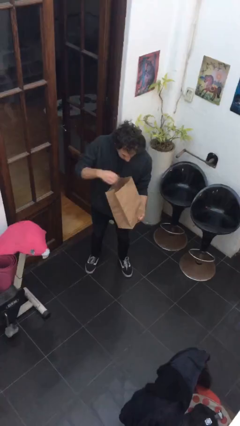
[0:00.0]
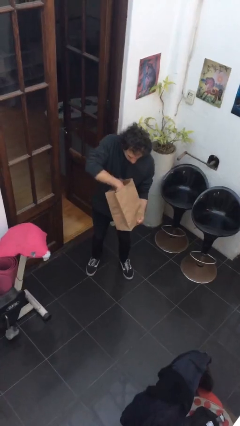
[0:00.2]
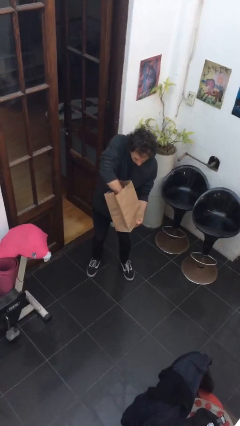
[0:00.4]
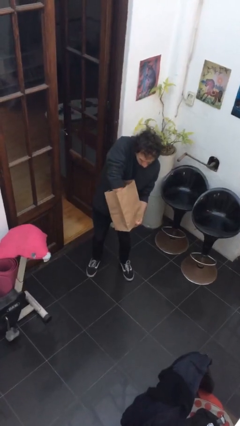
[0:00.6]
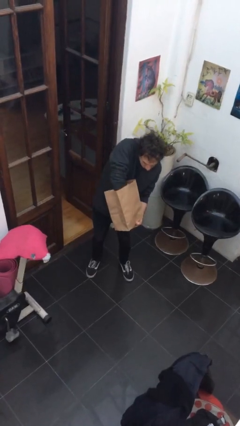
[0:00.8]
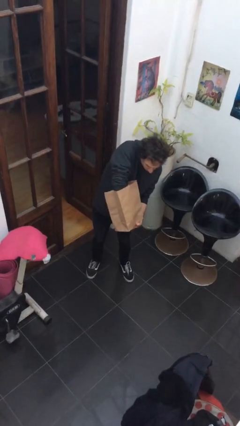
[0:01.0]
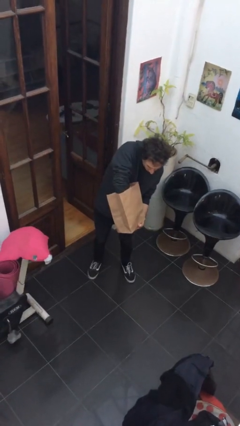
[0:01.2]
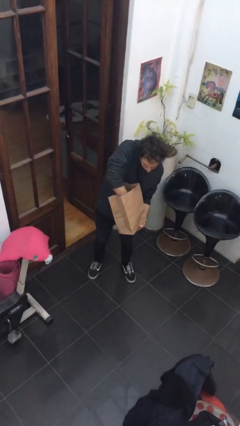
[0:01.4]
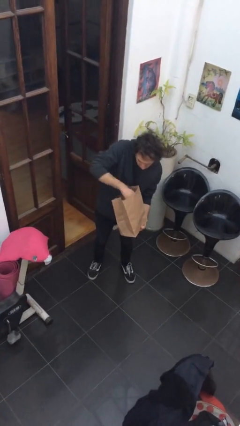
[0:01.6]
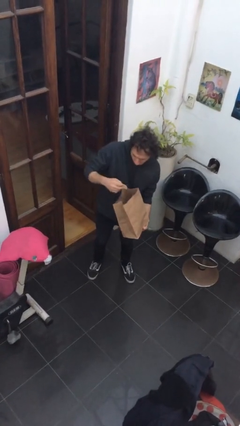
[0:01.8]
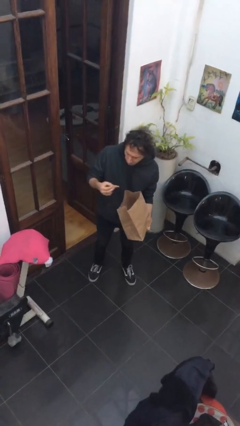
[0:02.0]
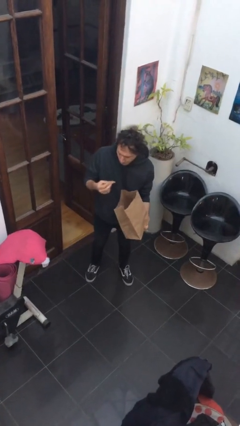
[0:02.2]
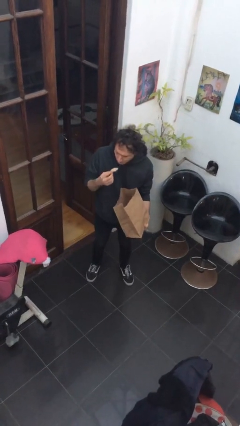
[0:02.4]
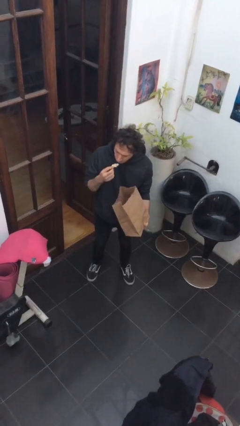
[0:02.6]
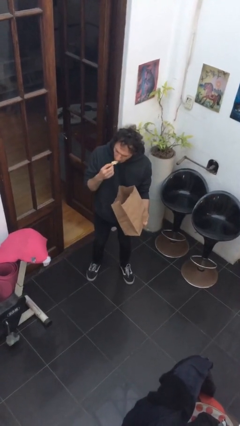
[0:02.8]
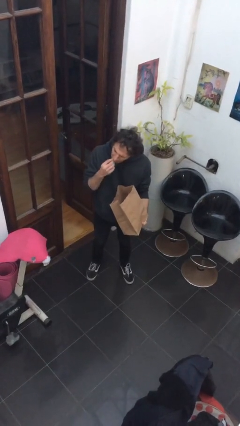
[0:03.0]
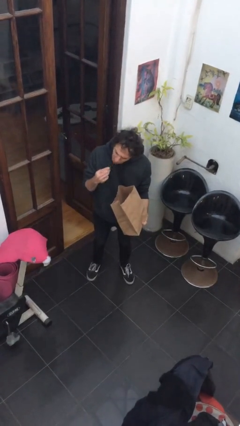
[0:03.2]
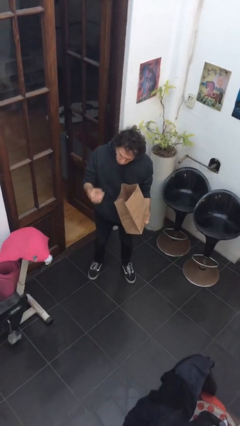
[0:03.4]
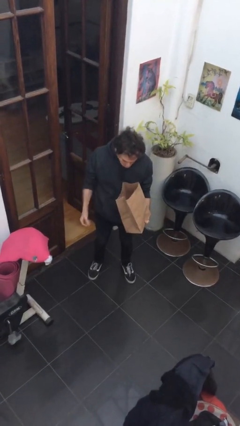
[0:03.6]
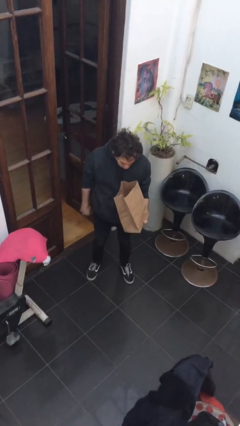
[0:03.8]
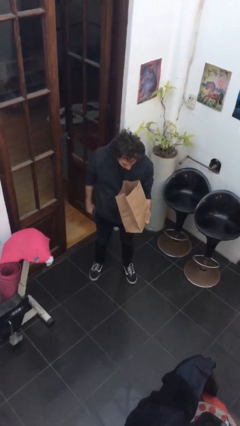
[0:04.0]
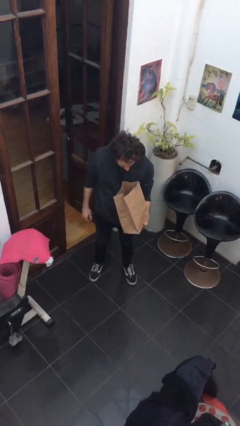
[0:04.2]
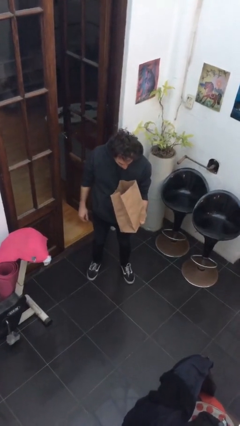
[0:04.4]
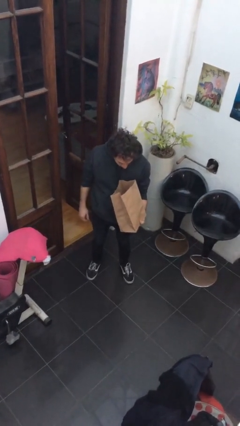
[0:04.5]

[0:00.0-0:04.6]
person eats snack from bag

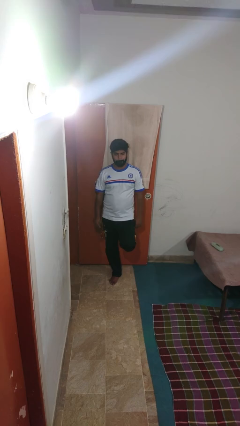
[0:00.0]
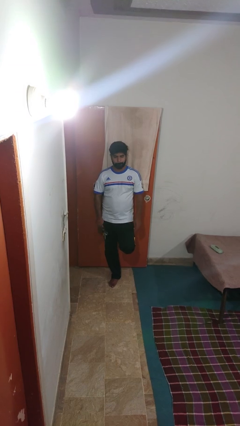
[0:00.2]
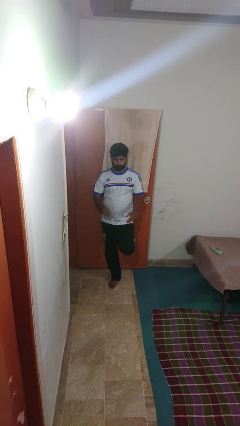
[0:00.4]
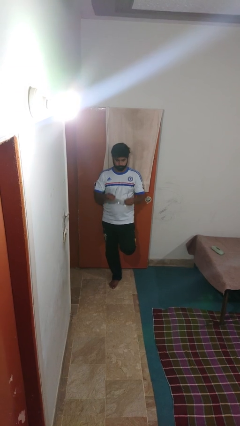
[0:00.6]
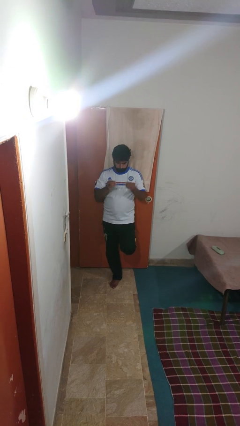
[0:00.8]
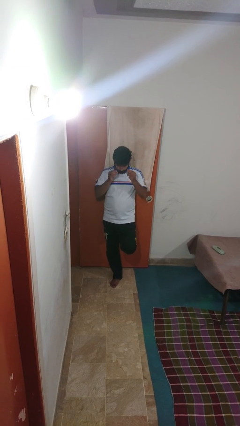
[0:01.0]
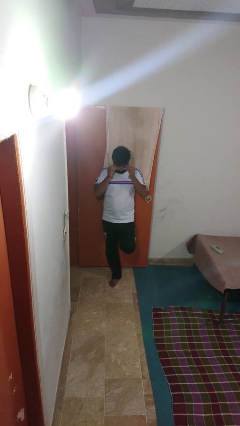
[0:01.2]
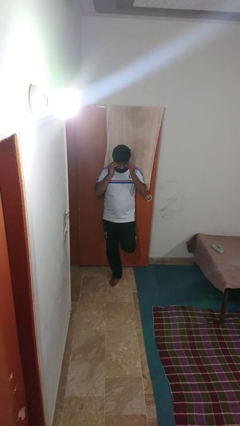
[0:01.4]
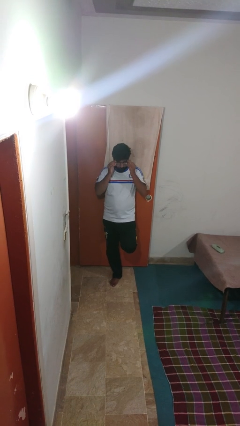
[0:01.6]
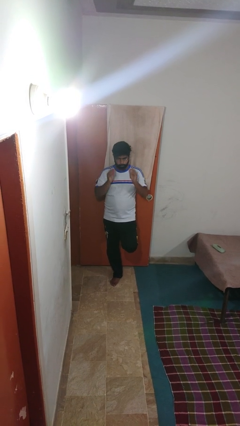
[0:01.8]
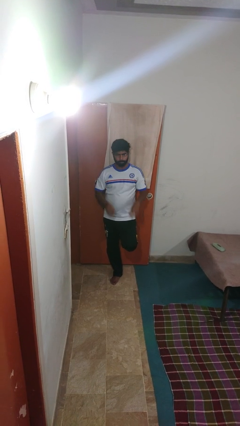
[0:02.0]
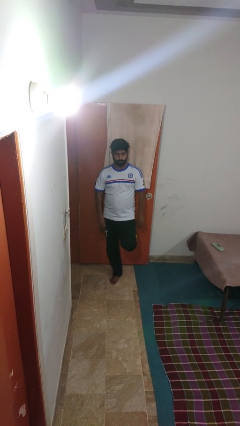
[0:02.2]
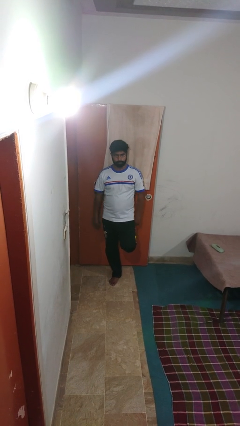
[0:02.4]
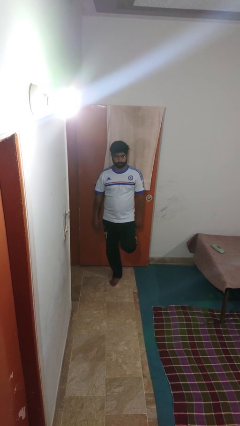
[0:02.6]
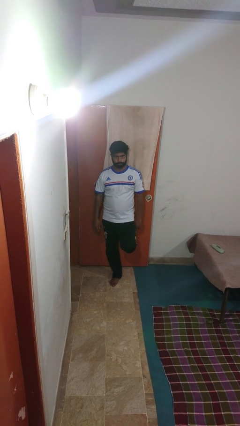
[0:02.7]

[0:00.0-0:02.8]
person puts on glasses

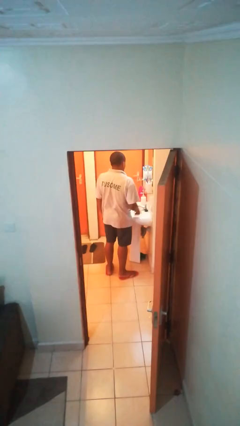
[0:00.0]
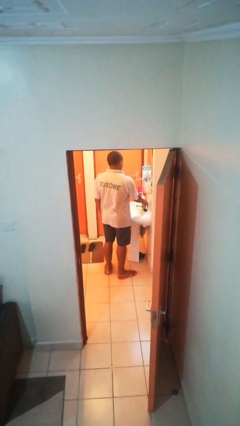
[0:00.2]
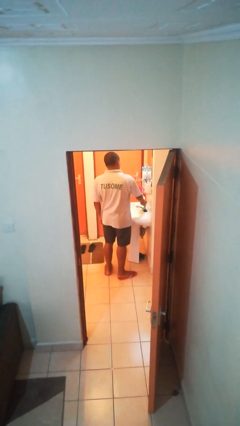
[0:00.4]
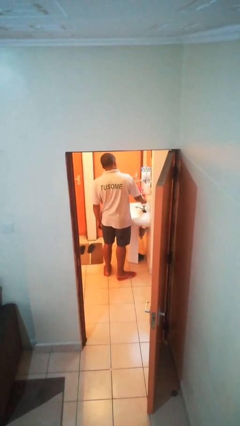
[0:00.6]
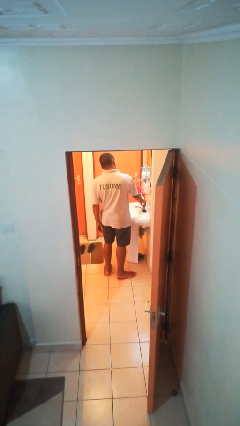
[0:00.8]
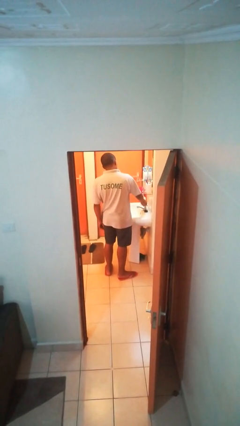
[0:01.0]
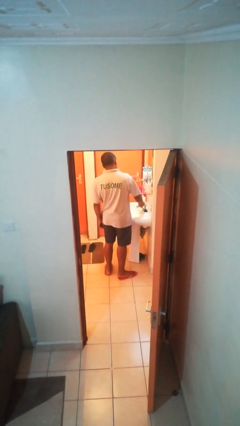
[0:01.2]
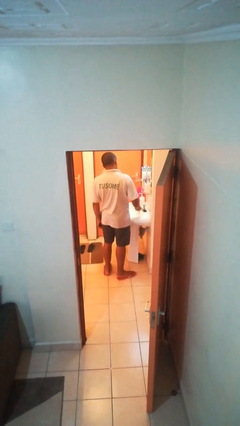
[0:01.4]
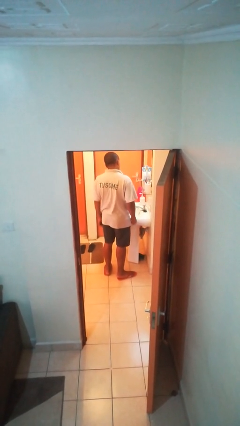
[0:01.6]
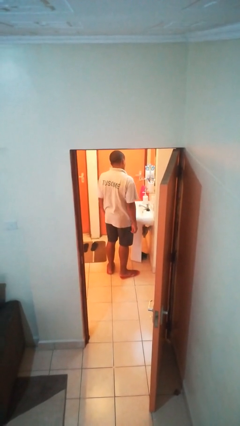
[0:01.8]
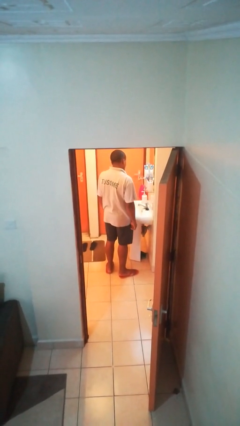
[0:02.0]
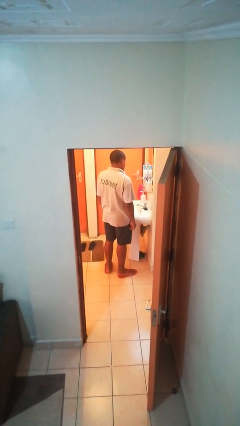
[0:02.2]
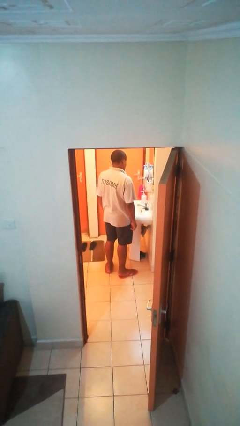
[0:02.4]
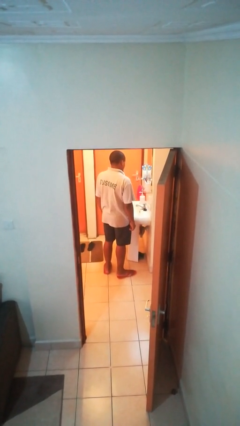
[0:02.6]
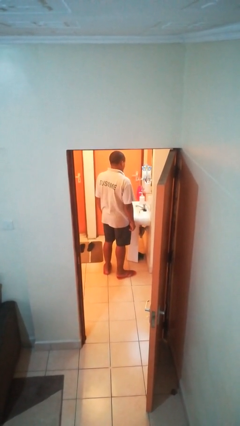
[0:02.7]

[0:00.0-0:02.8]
person turns on faucet

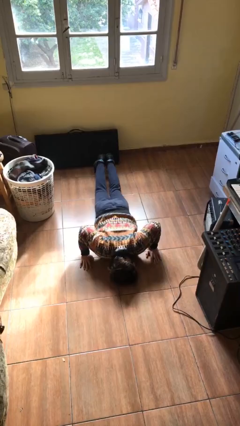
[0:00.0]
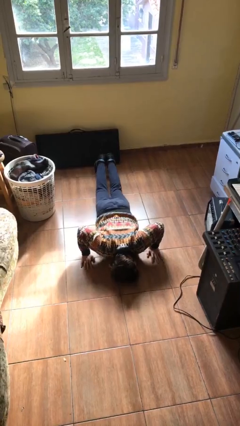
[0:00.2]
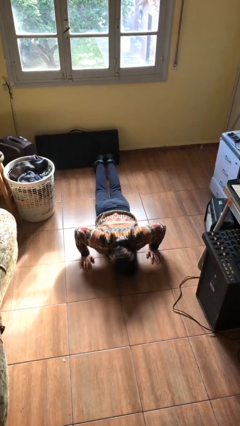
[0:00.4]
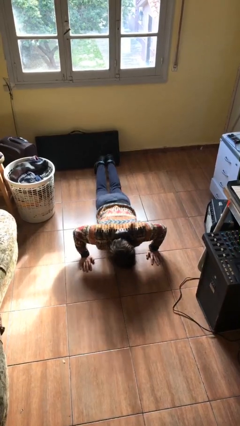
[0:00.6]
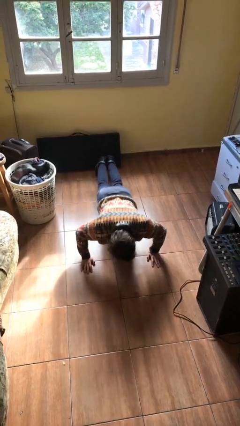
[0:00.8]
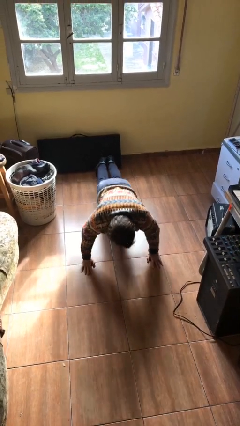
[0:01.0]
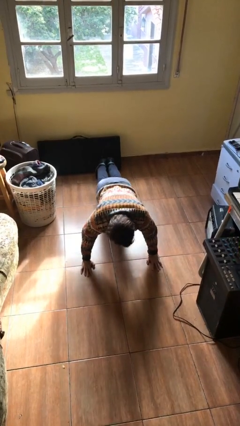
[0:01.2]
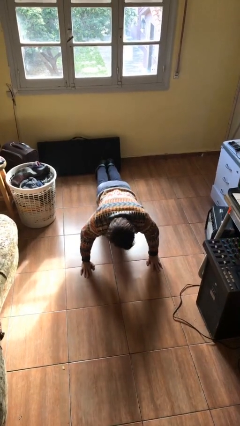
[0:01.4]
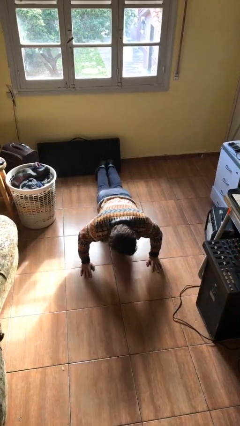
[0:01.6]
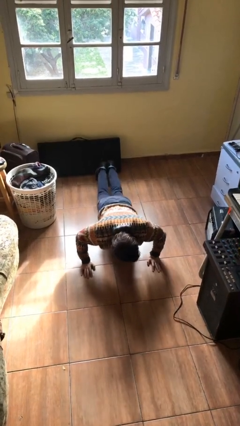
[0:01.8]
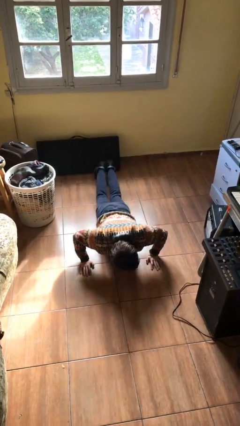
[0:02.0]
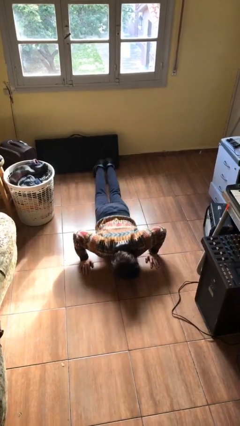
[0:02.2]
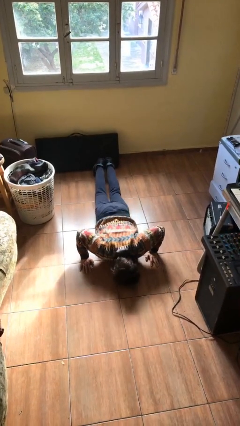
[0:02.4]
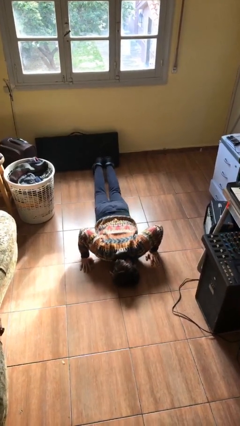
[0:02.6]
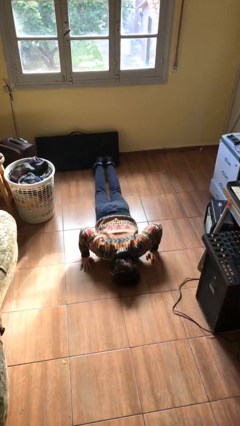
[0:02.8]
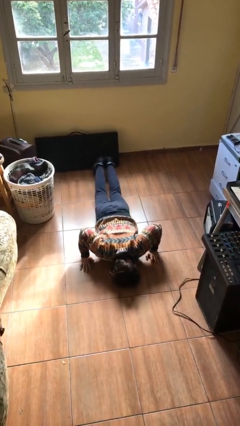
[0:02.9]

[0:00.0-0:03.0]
person exercises with pushup

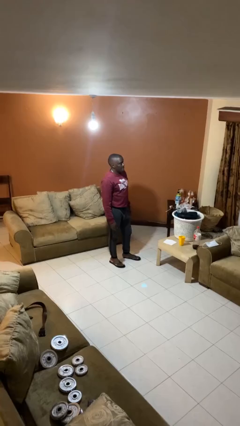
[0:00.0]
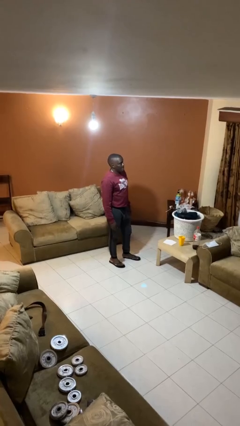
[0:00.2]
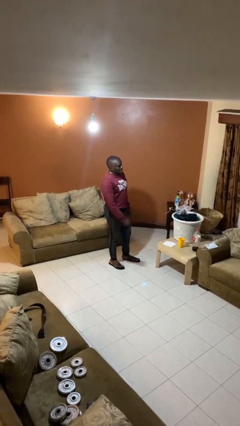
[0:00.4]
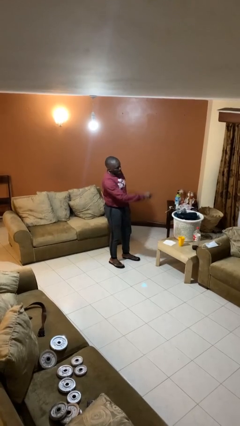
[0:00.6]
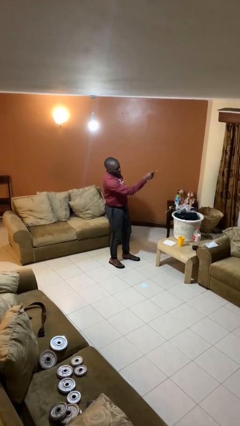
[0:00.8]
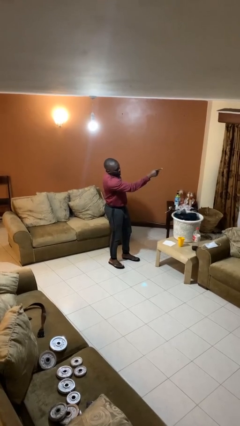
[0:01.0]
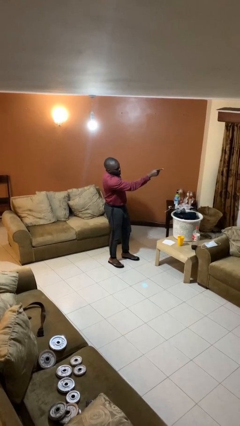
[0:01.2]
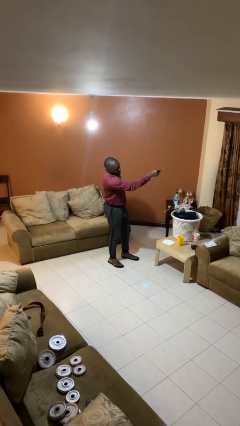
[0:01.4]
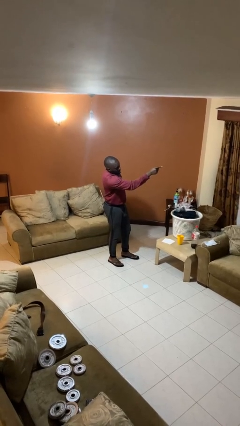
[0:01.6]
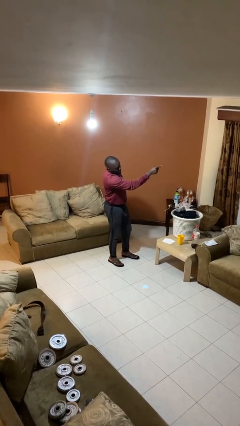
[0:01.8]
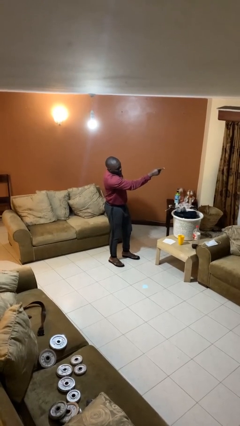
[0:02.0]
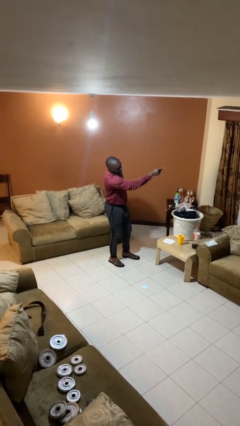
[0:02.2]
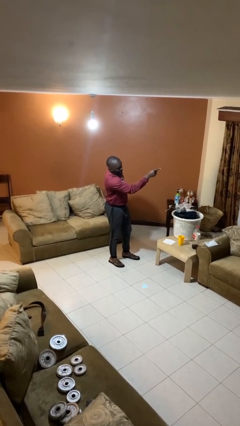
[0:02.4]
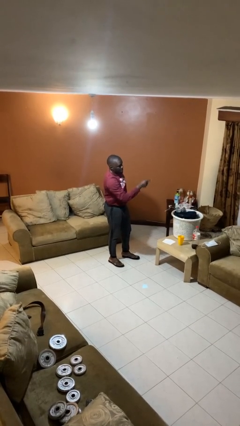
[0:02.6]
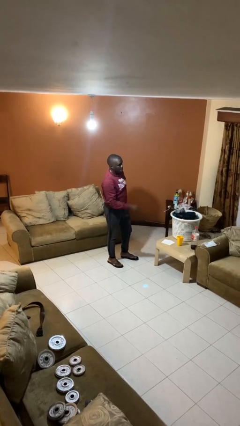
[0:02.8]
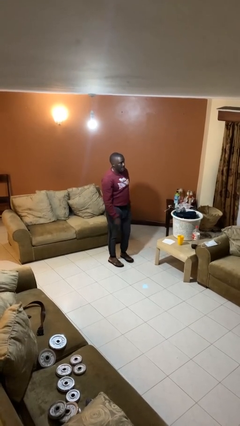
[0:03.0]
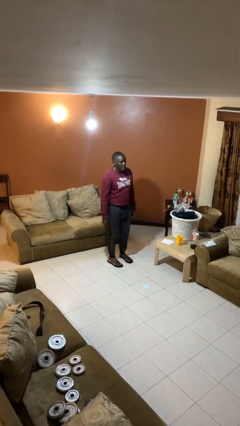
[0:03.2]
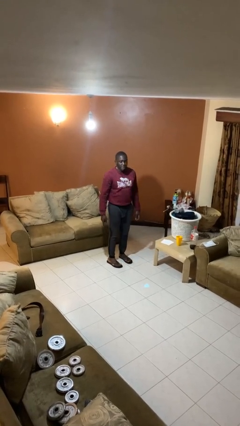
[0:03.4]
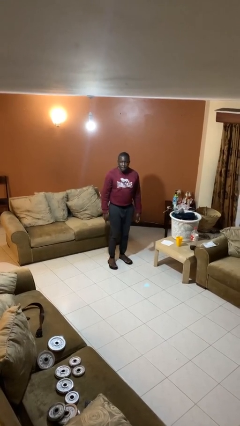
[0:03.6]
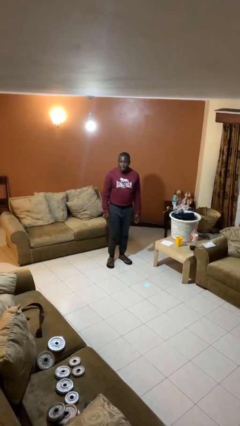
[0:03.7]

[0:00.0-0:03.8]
person points at person

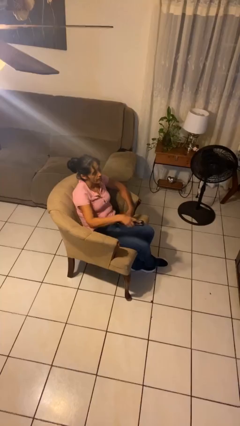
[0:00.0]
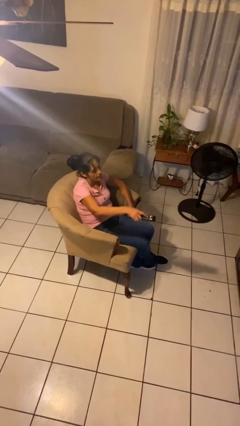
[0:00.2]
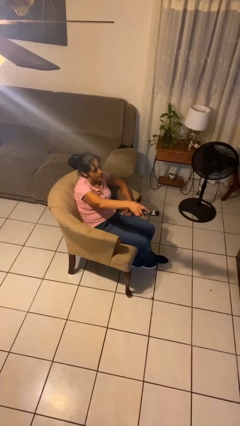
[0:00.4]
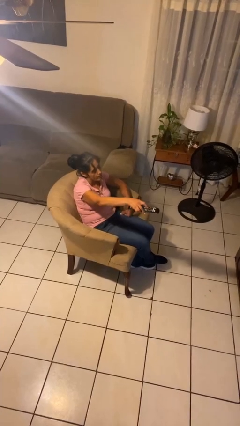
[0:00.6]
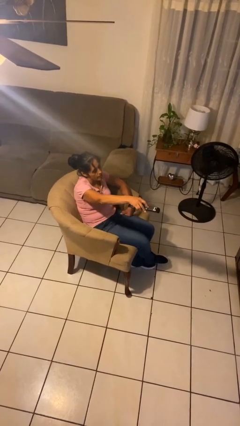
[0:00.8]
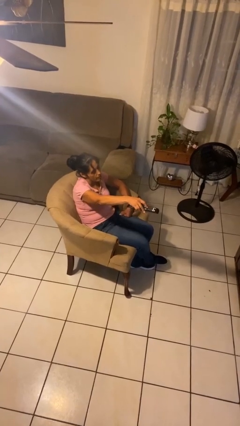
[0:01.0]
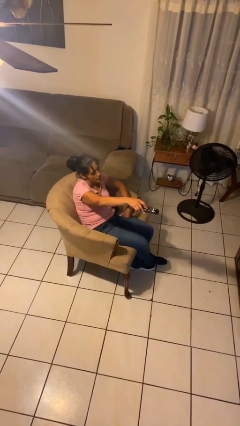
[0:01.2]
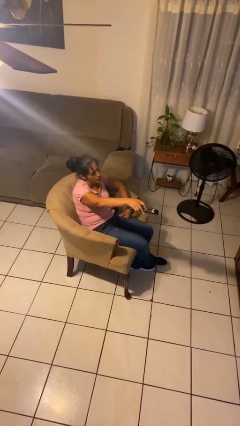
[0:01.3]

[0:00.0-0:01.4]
person uses television remote
